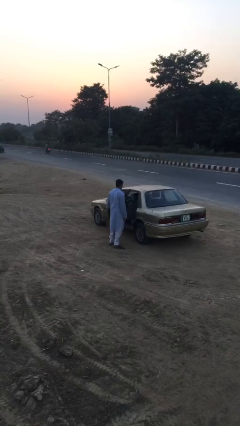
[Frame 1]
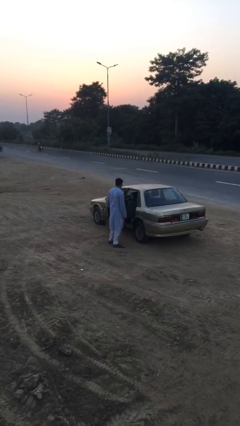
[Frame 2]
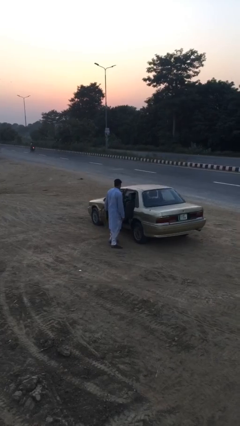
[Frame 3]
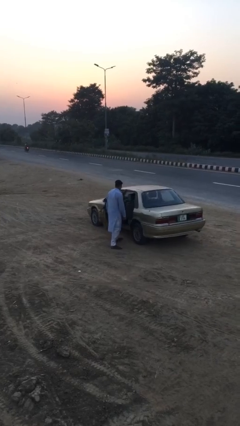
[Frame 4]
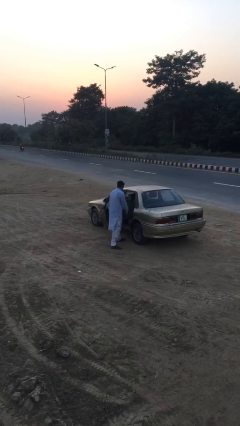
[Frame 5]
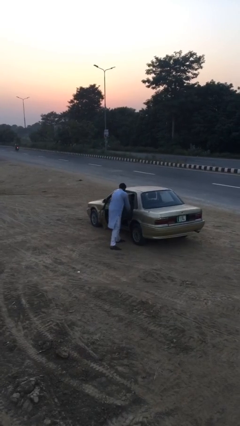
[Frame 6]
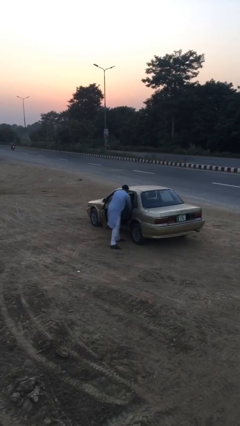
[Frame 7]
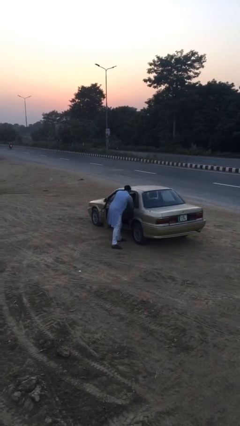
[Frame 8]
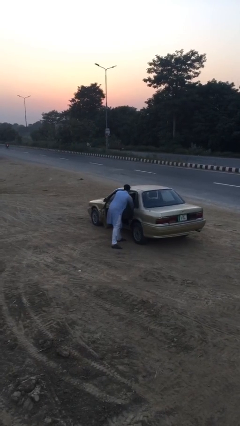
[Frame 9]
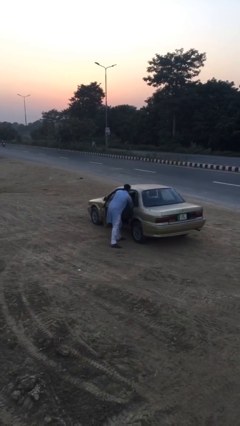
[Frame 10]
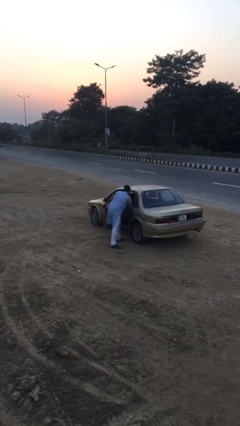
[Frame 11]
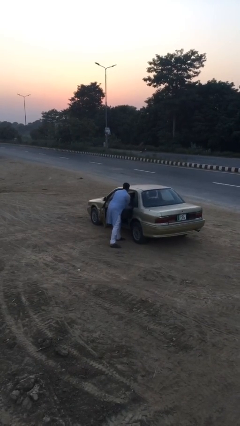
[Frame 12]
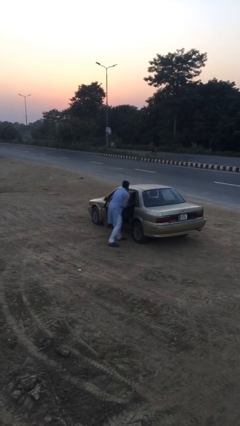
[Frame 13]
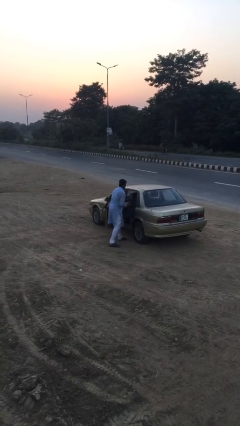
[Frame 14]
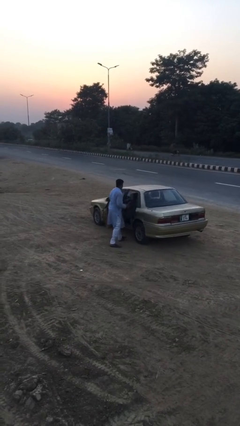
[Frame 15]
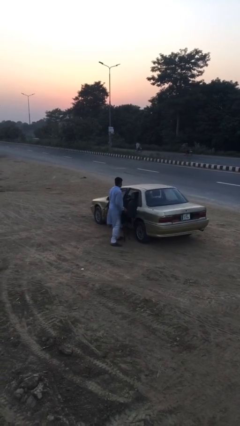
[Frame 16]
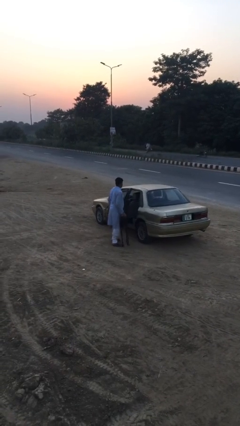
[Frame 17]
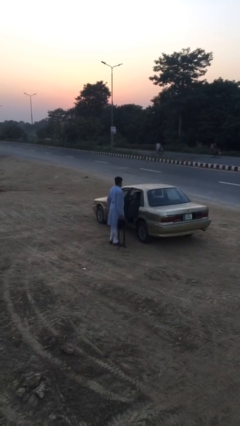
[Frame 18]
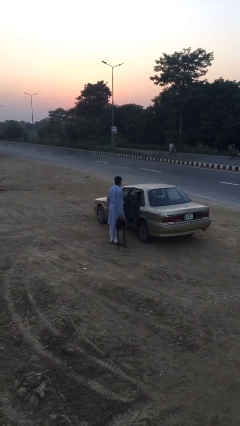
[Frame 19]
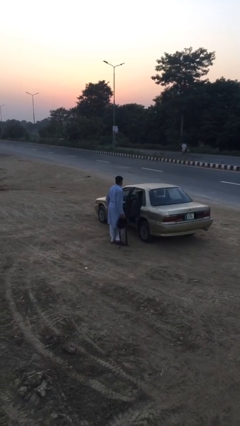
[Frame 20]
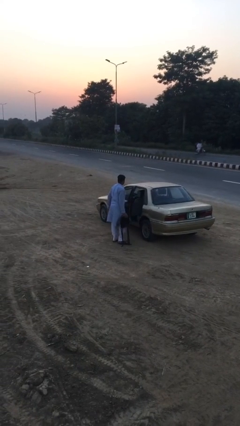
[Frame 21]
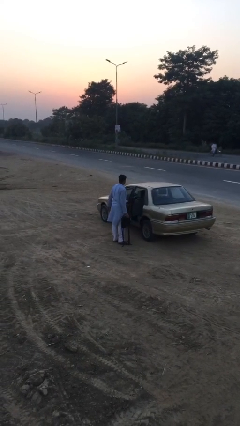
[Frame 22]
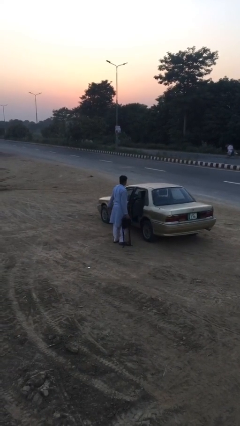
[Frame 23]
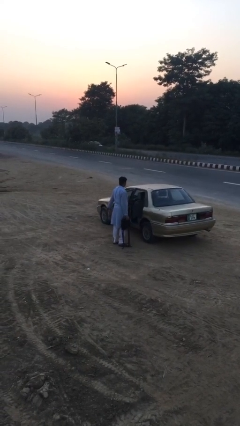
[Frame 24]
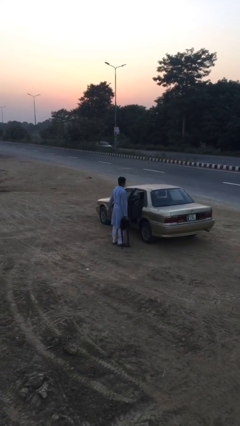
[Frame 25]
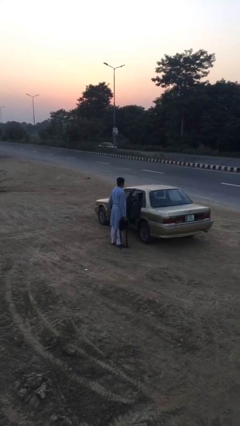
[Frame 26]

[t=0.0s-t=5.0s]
person unloads car

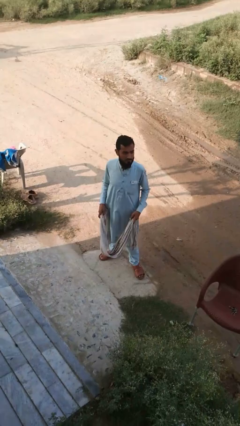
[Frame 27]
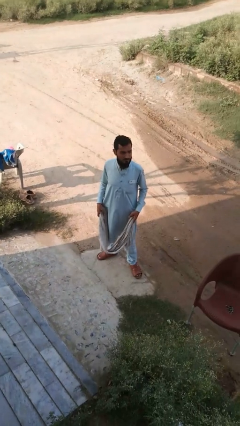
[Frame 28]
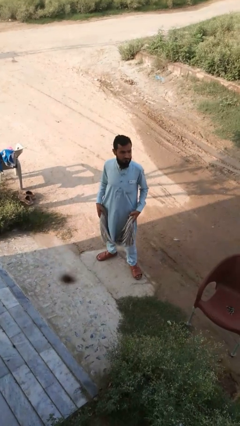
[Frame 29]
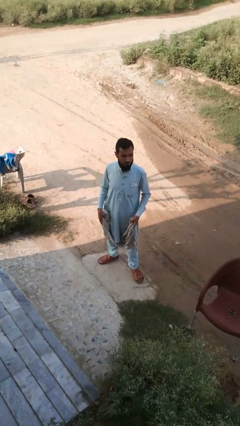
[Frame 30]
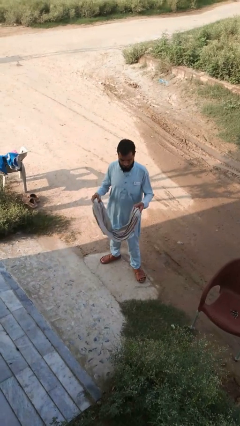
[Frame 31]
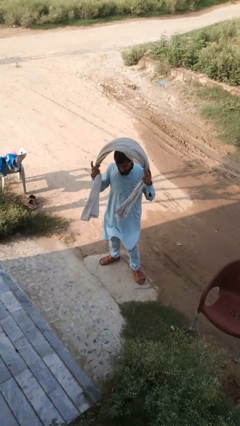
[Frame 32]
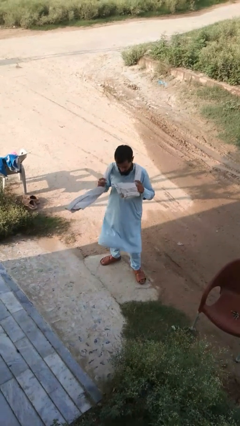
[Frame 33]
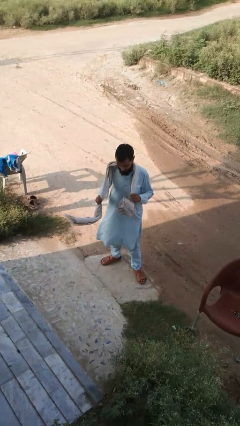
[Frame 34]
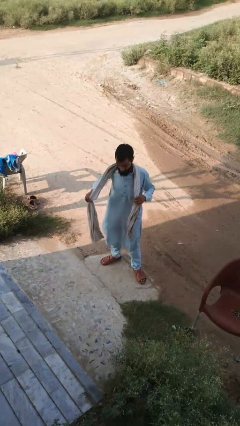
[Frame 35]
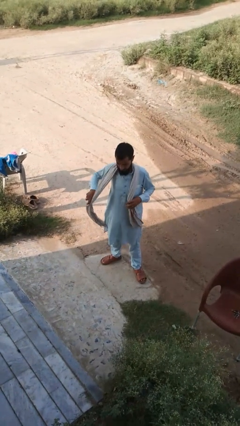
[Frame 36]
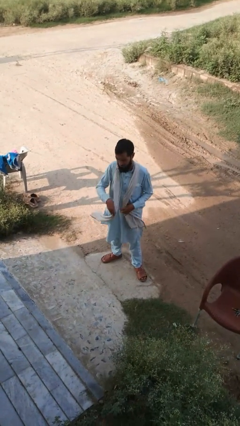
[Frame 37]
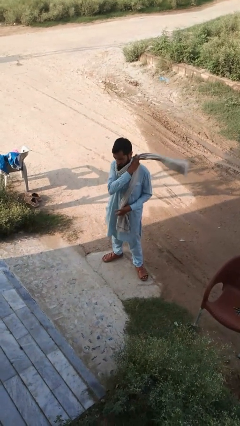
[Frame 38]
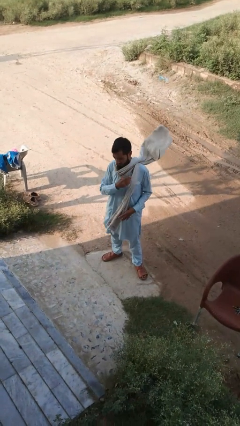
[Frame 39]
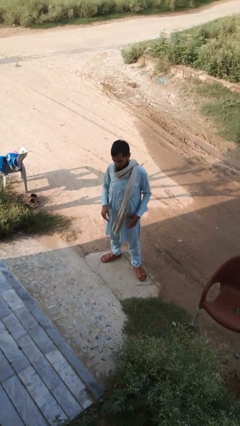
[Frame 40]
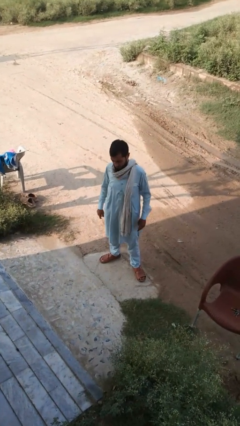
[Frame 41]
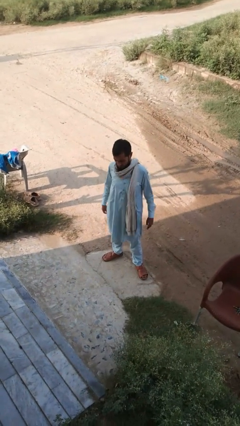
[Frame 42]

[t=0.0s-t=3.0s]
person puts on scarf

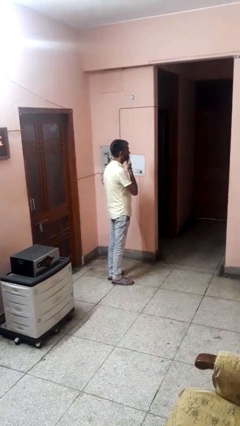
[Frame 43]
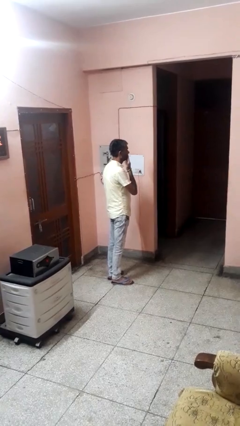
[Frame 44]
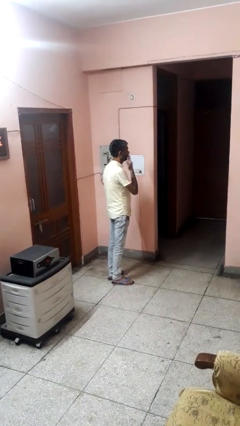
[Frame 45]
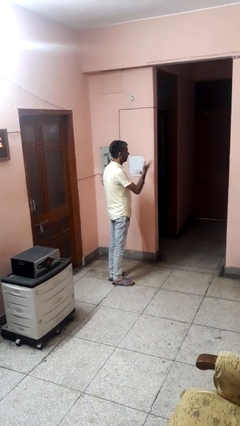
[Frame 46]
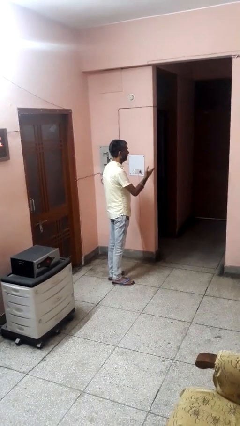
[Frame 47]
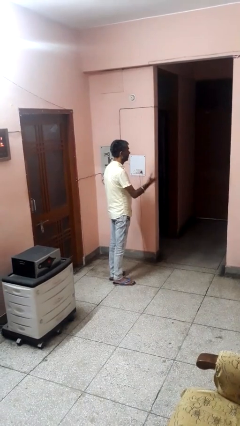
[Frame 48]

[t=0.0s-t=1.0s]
person gestures blow kiss

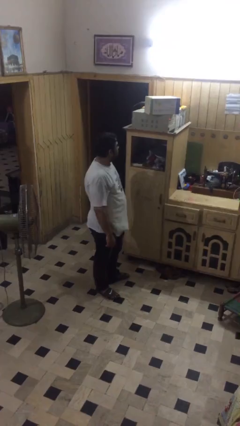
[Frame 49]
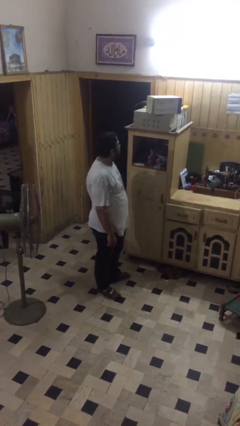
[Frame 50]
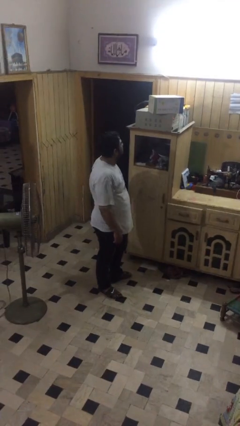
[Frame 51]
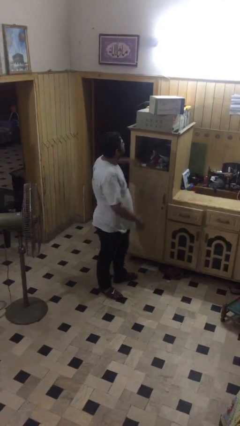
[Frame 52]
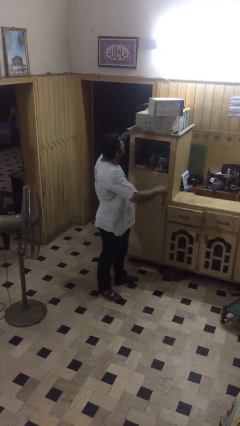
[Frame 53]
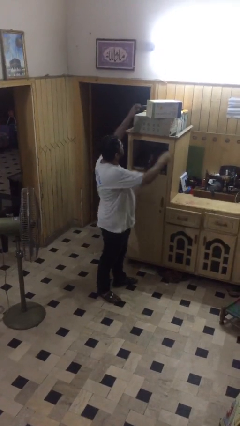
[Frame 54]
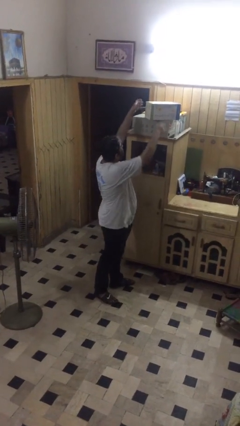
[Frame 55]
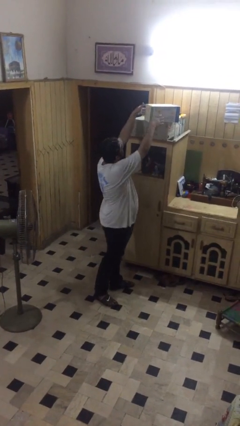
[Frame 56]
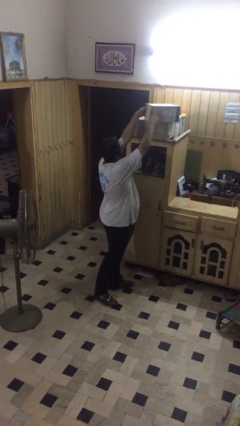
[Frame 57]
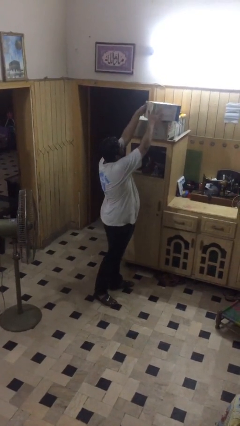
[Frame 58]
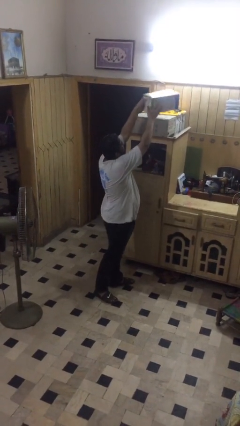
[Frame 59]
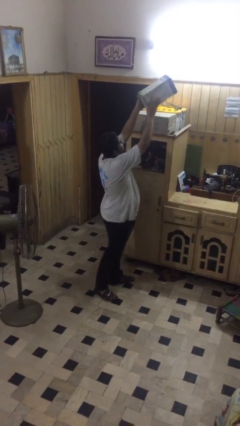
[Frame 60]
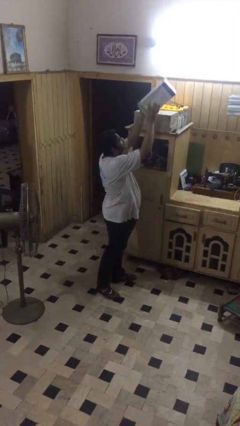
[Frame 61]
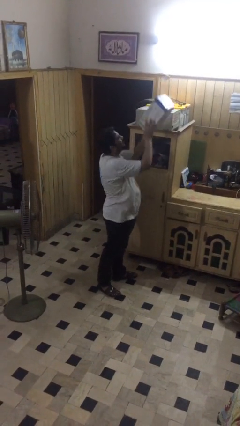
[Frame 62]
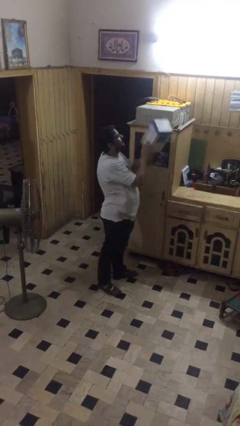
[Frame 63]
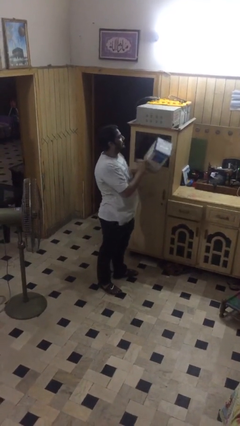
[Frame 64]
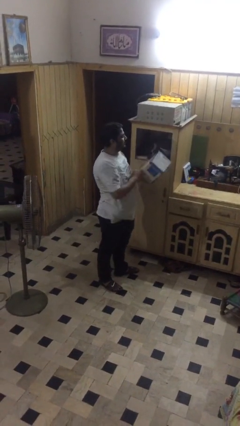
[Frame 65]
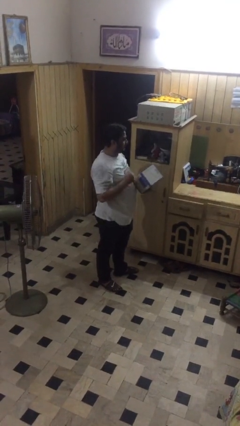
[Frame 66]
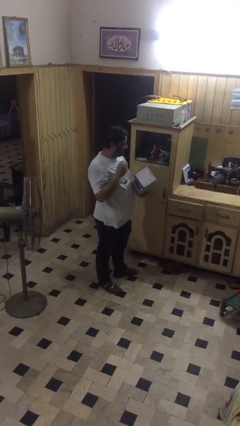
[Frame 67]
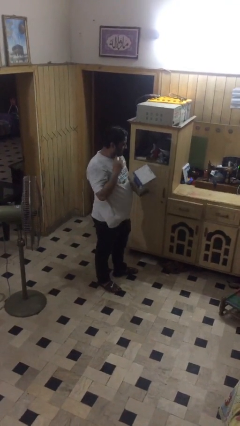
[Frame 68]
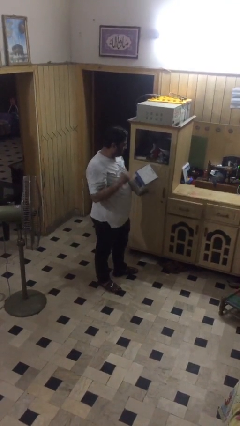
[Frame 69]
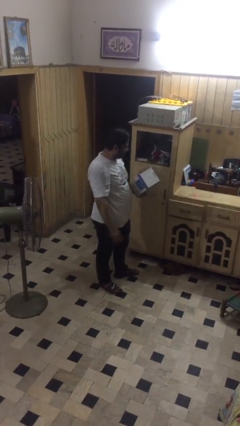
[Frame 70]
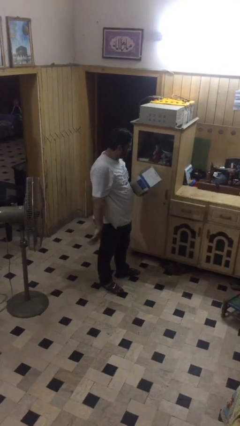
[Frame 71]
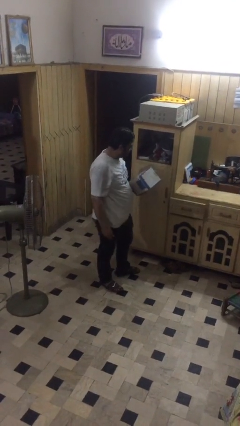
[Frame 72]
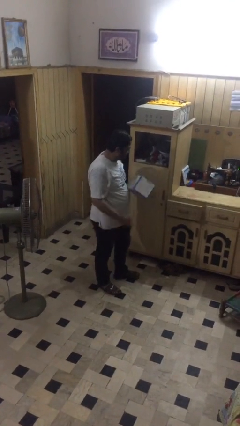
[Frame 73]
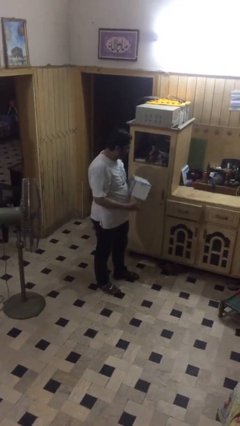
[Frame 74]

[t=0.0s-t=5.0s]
person picks up object from shelf

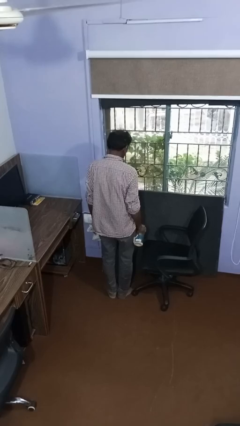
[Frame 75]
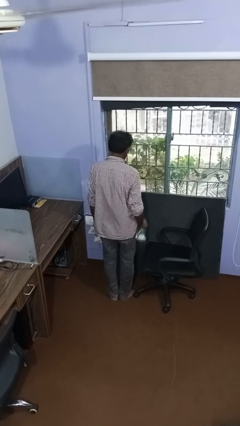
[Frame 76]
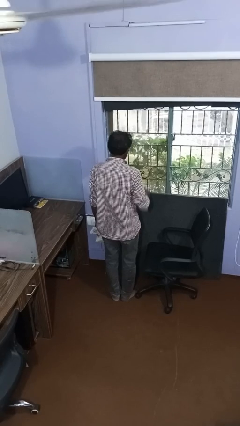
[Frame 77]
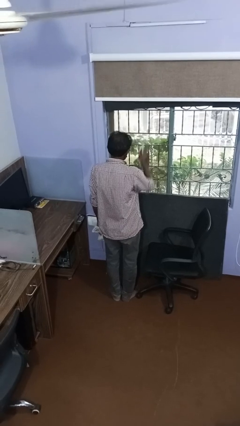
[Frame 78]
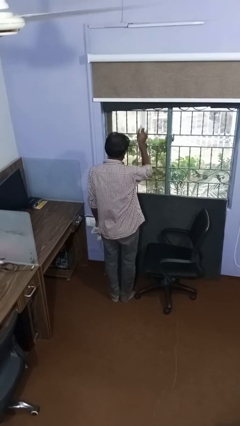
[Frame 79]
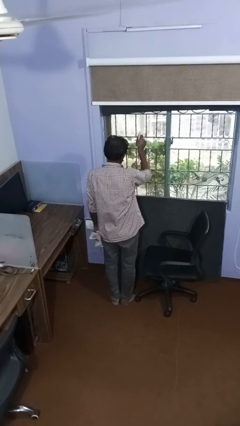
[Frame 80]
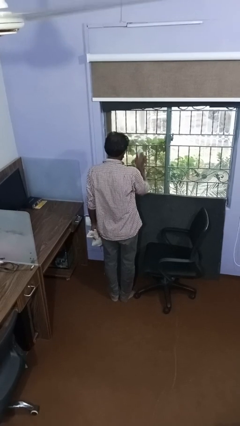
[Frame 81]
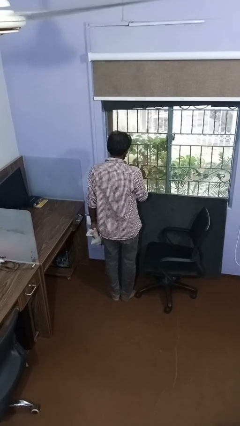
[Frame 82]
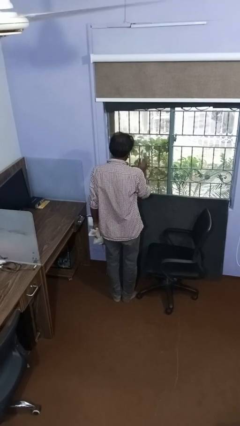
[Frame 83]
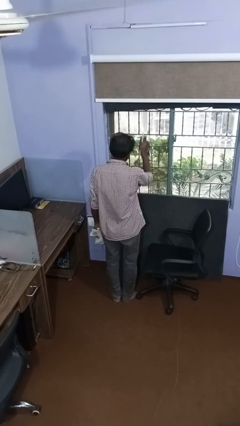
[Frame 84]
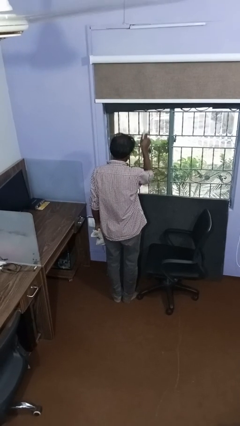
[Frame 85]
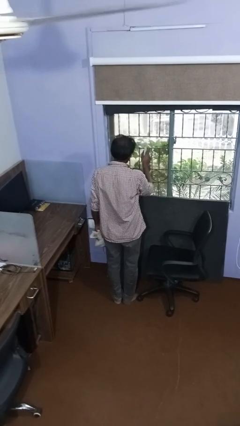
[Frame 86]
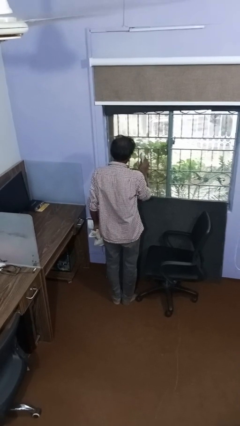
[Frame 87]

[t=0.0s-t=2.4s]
person sprays from bottle

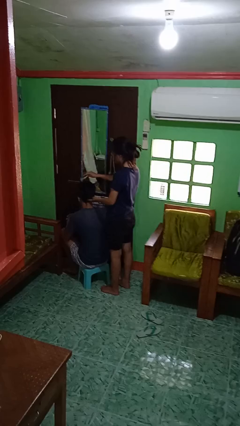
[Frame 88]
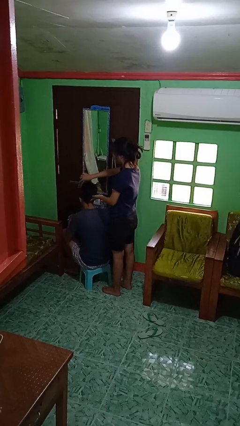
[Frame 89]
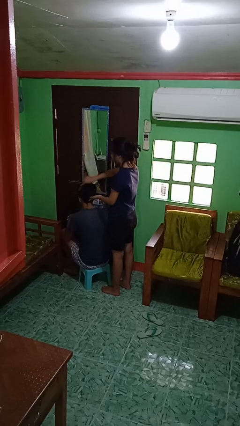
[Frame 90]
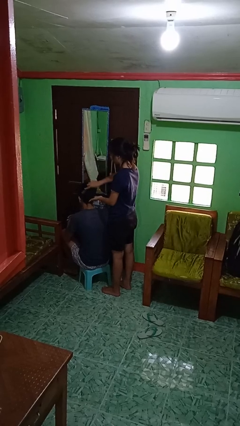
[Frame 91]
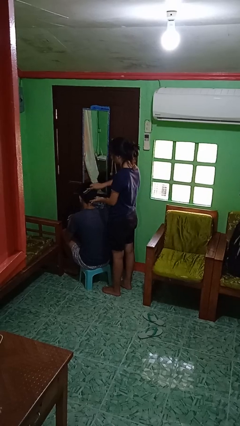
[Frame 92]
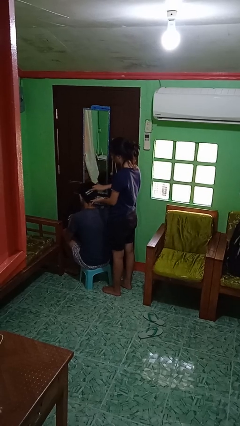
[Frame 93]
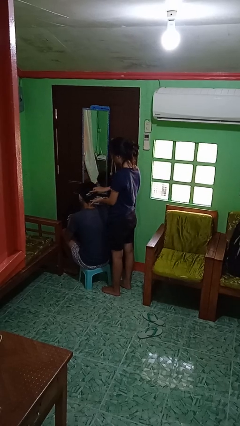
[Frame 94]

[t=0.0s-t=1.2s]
person brushes hair of person
